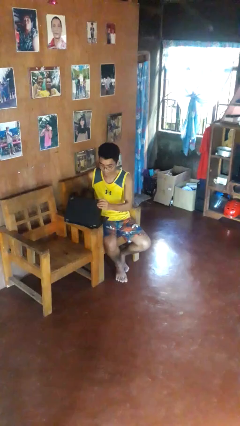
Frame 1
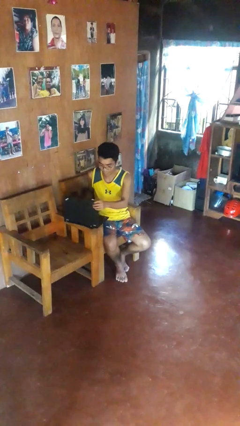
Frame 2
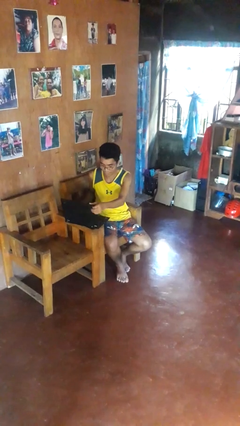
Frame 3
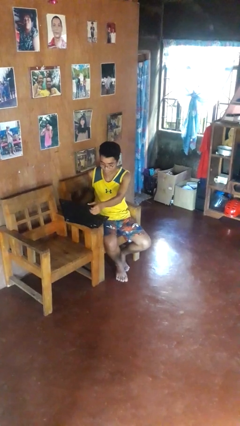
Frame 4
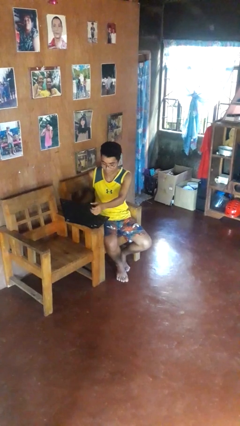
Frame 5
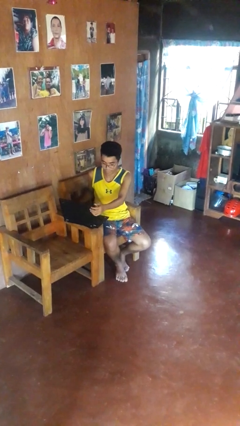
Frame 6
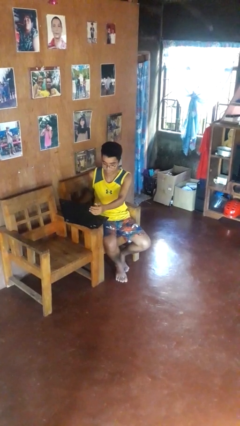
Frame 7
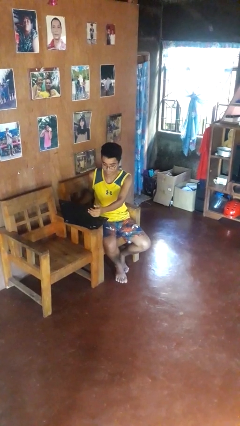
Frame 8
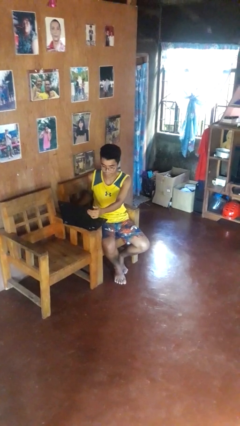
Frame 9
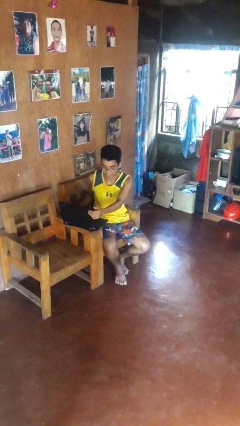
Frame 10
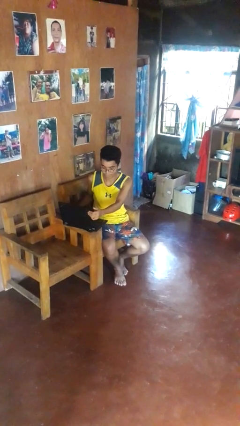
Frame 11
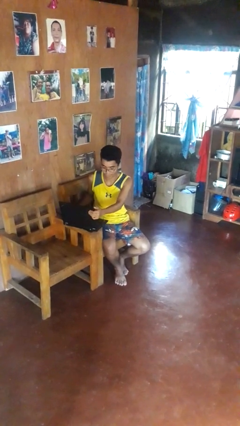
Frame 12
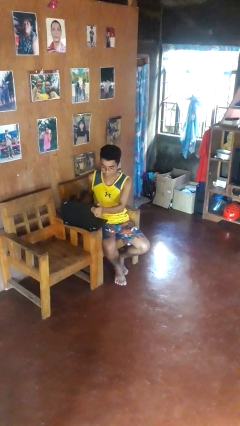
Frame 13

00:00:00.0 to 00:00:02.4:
person opens laptop

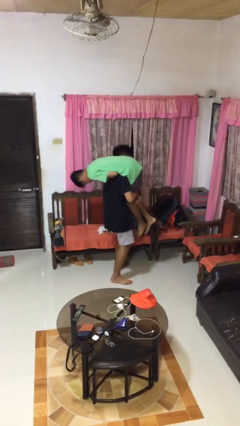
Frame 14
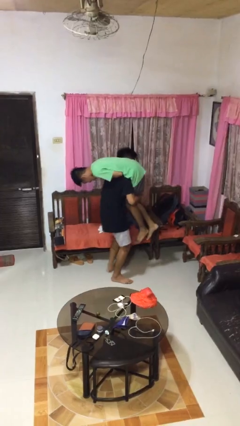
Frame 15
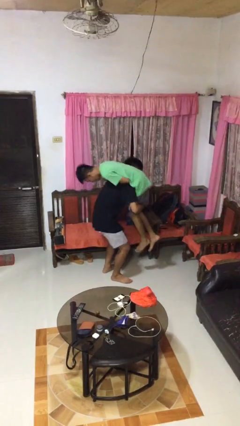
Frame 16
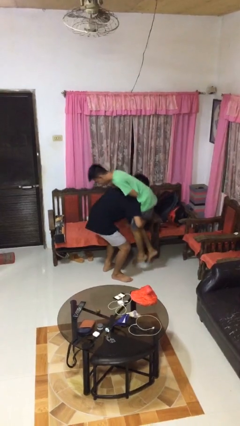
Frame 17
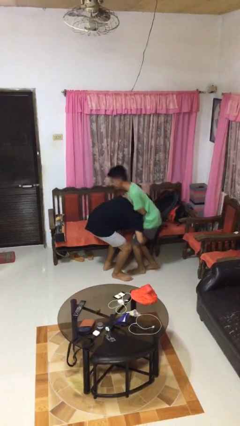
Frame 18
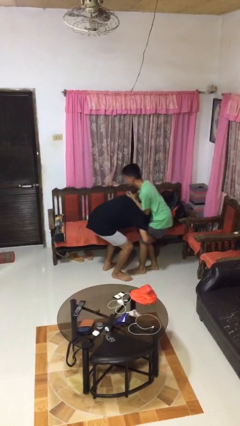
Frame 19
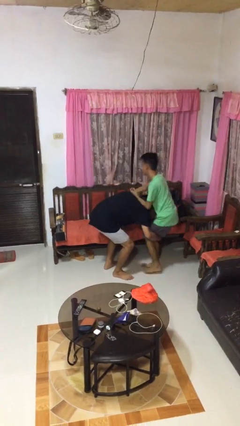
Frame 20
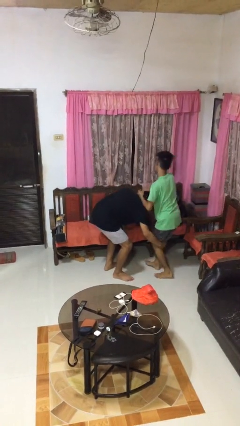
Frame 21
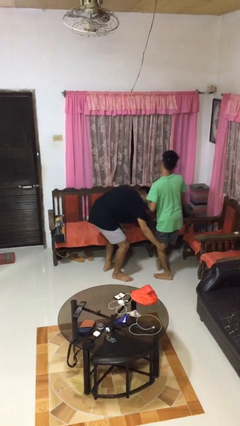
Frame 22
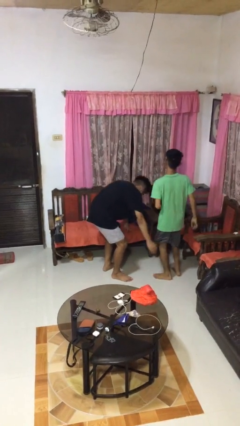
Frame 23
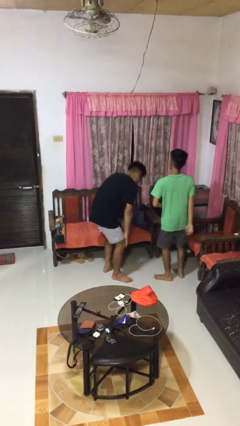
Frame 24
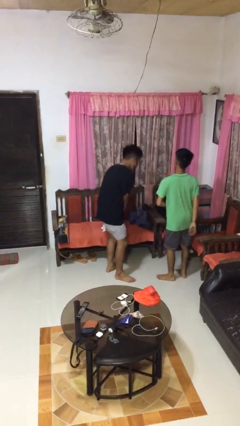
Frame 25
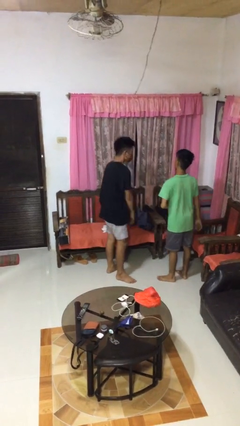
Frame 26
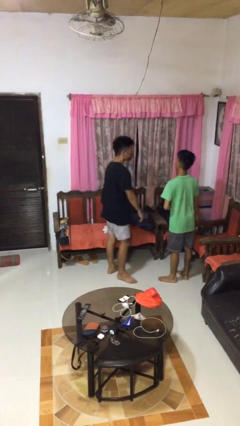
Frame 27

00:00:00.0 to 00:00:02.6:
person puts down person

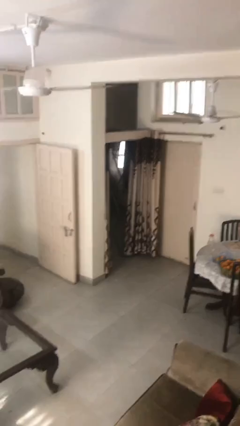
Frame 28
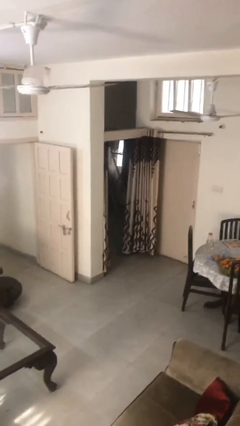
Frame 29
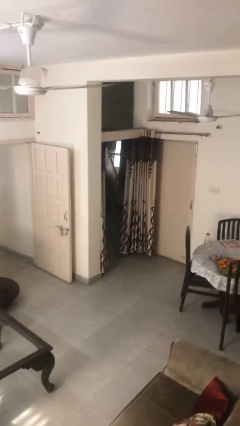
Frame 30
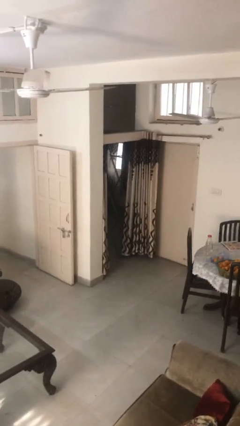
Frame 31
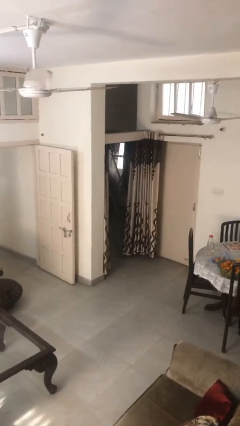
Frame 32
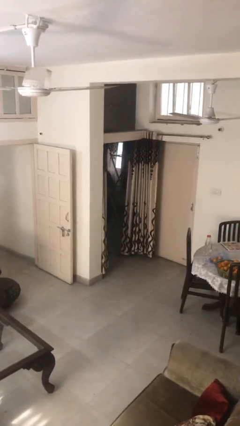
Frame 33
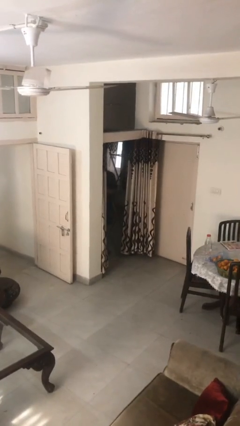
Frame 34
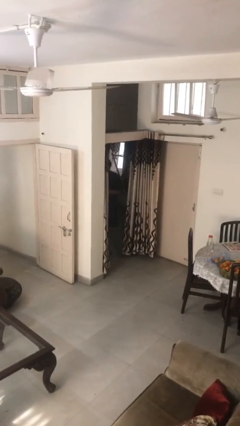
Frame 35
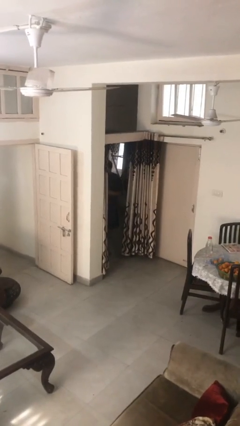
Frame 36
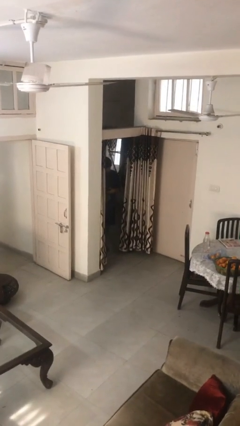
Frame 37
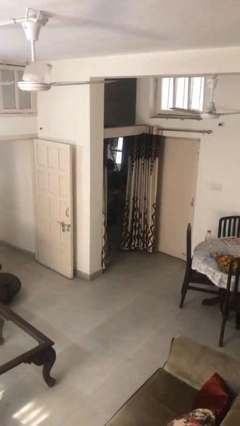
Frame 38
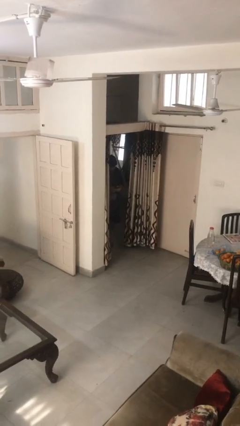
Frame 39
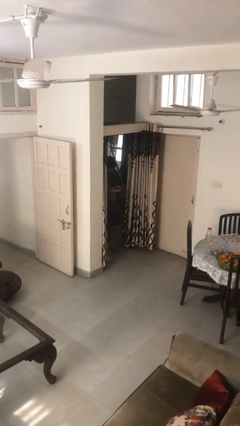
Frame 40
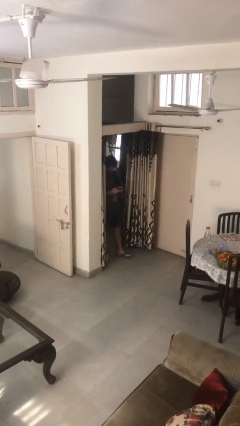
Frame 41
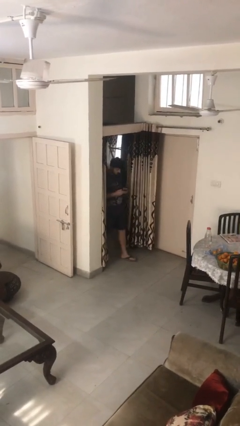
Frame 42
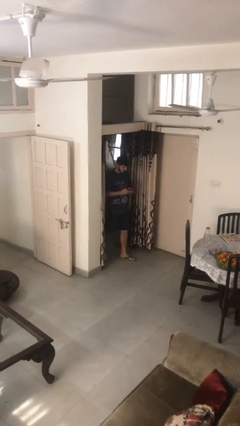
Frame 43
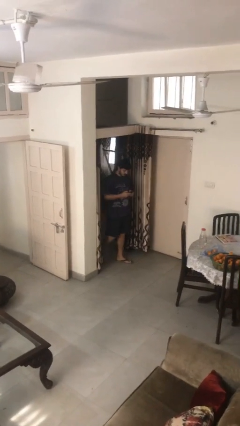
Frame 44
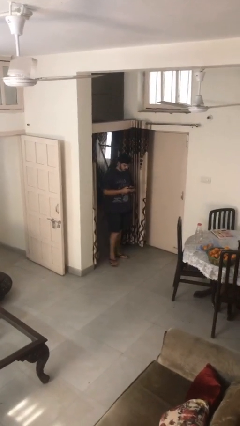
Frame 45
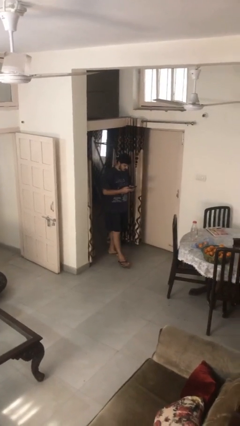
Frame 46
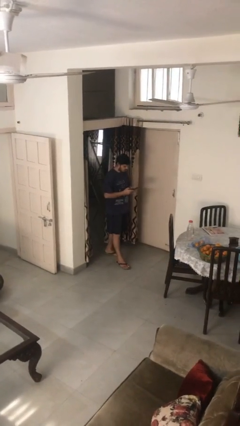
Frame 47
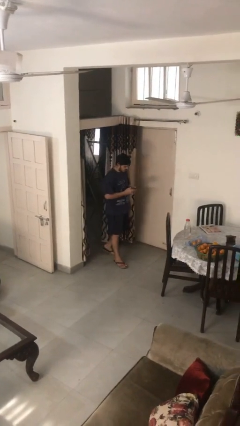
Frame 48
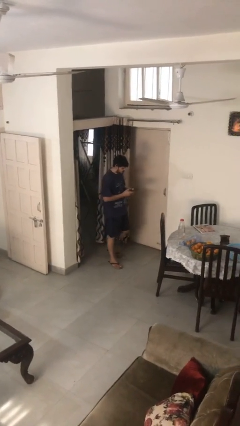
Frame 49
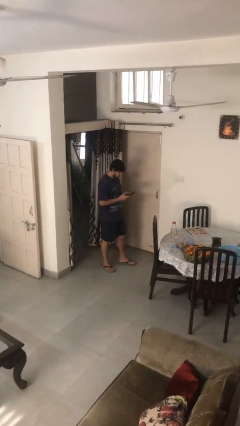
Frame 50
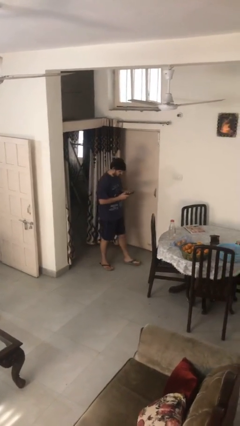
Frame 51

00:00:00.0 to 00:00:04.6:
person enters scene through structure

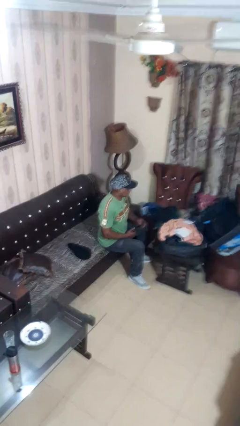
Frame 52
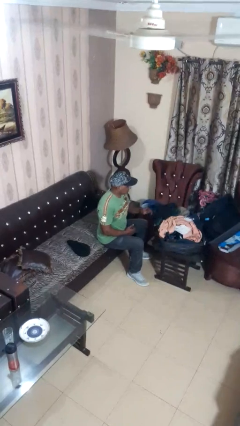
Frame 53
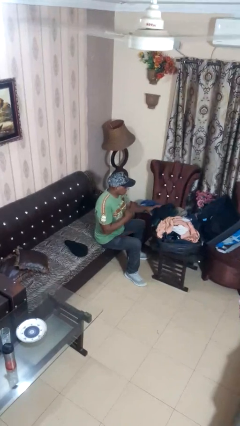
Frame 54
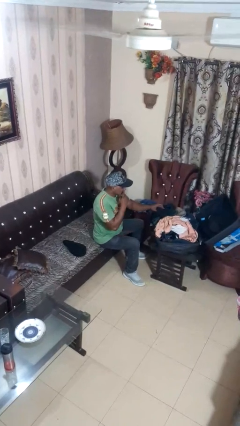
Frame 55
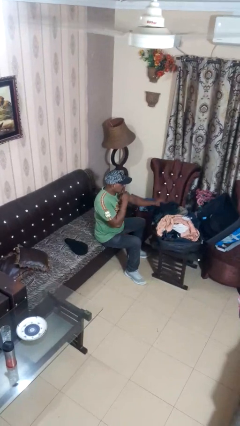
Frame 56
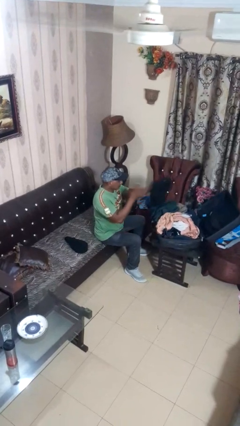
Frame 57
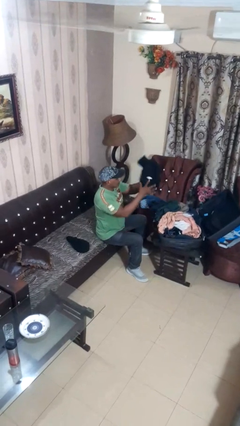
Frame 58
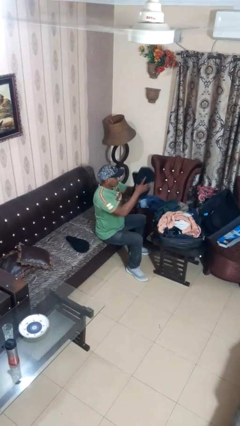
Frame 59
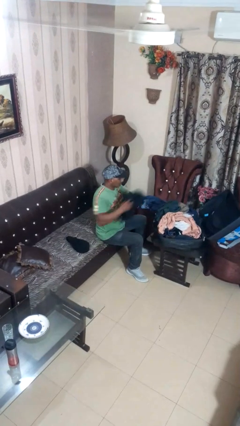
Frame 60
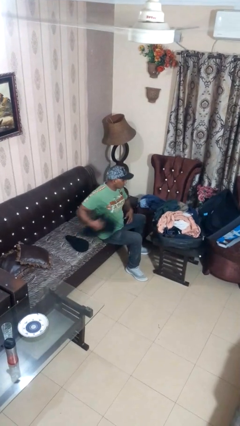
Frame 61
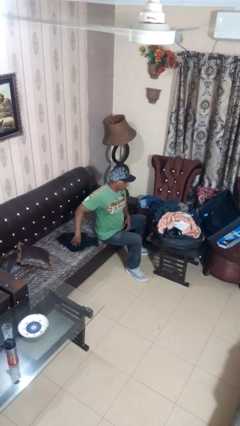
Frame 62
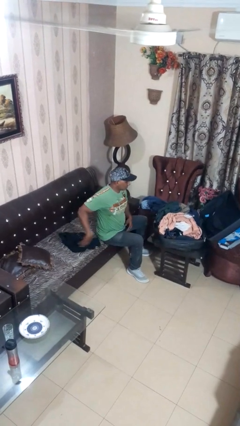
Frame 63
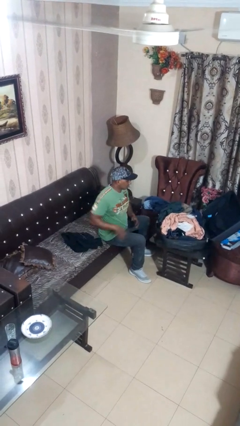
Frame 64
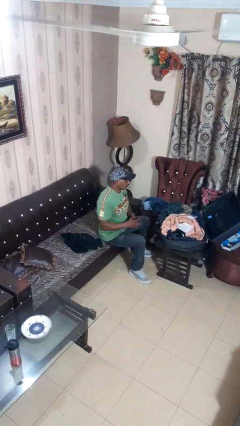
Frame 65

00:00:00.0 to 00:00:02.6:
person unloads clothes from suitcase

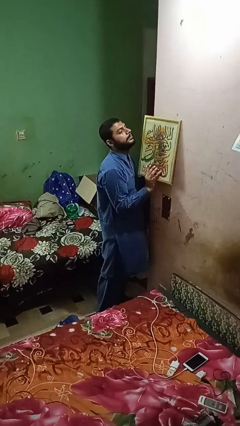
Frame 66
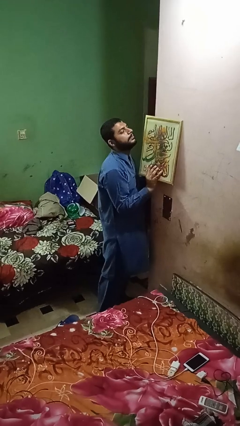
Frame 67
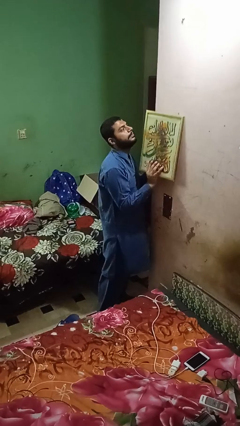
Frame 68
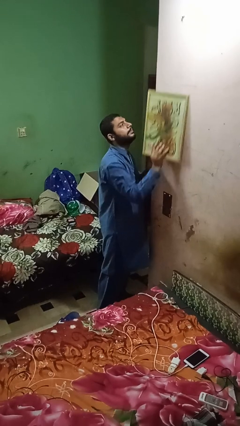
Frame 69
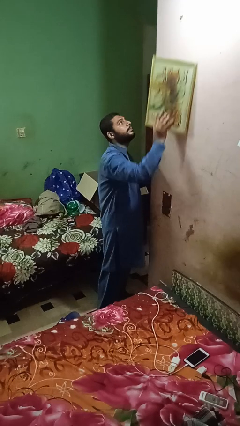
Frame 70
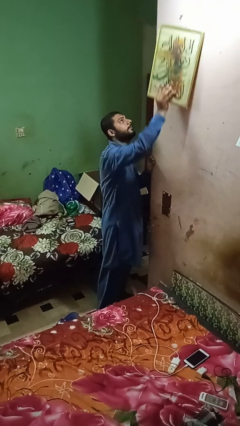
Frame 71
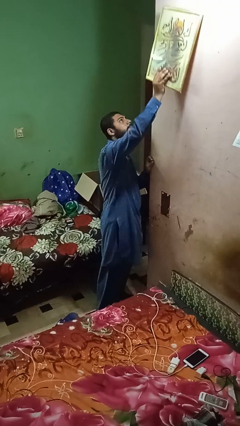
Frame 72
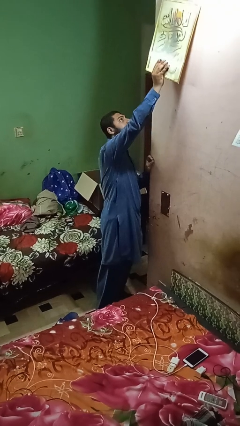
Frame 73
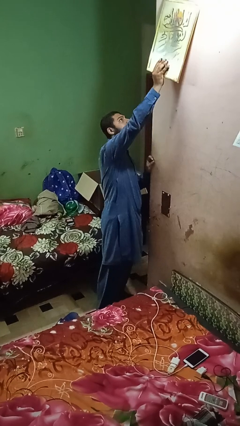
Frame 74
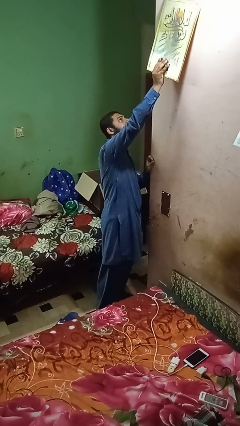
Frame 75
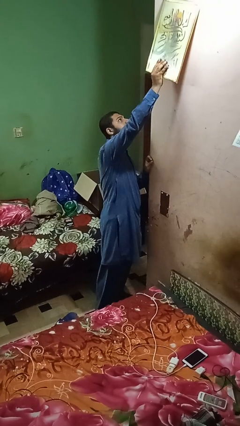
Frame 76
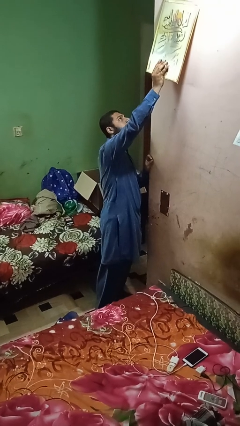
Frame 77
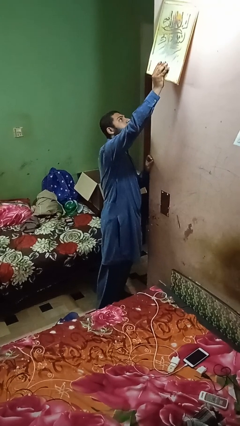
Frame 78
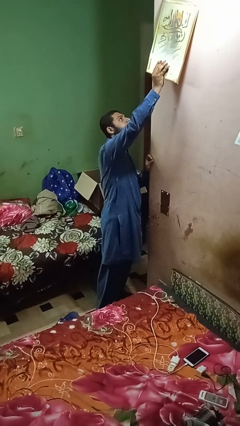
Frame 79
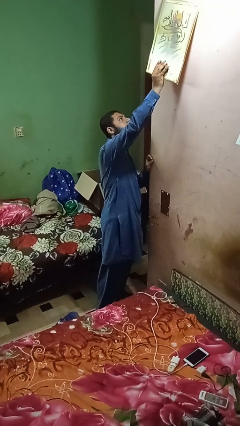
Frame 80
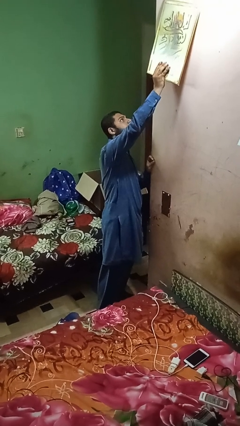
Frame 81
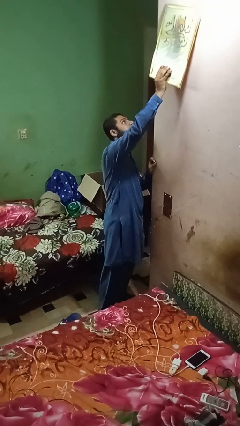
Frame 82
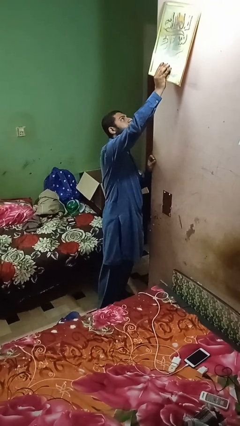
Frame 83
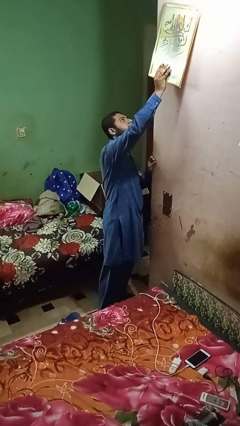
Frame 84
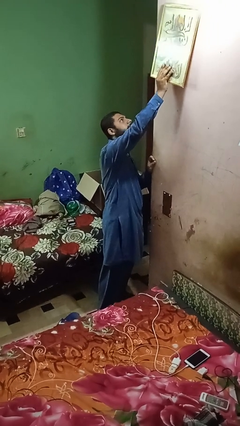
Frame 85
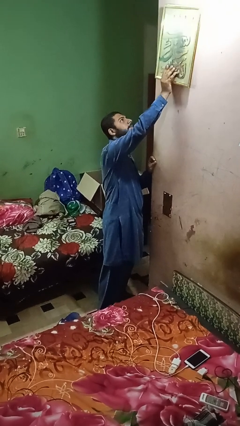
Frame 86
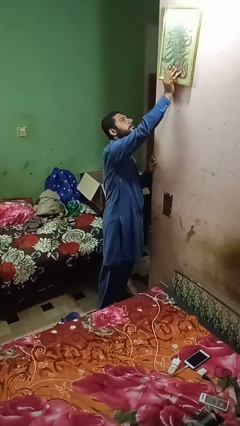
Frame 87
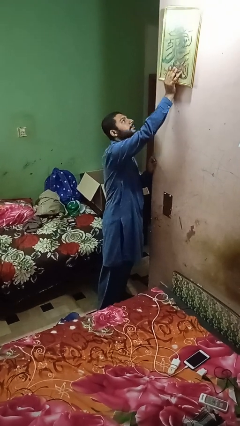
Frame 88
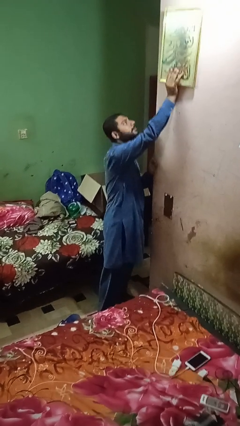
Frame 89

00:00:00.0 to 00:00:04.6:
person puts up picture frame

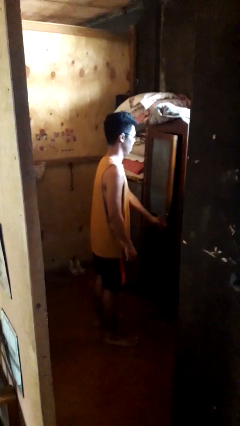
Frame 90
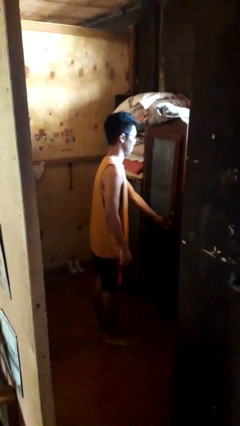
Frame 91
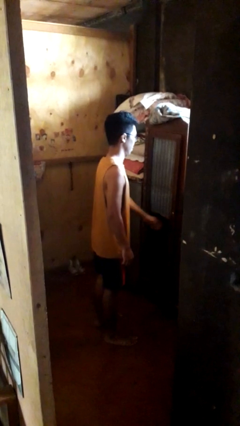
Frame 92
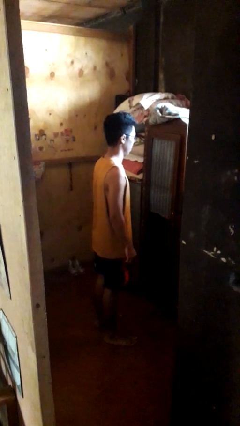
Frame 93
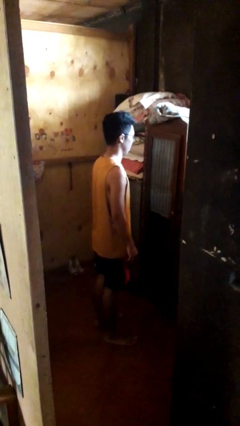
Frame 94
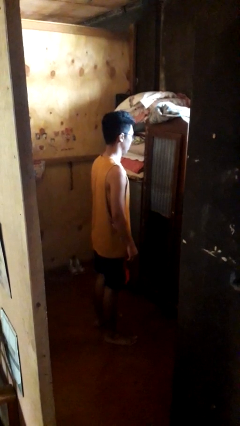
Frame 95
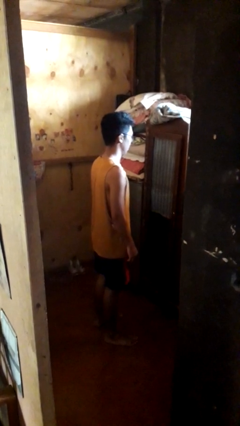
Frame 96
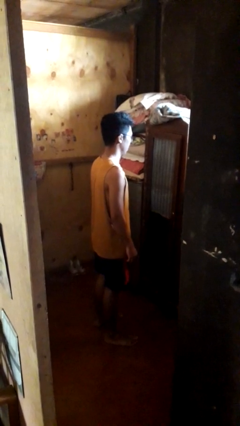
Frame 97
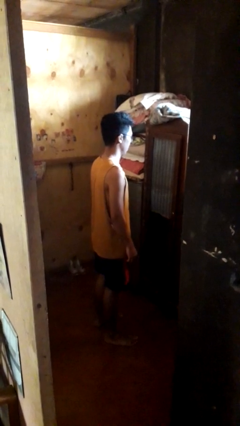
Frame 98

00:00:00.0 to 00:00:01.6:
person closes closet door
